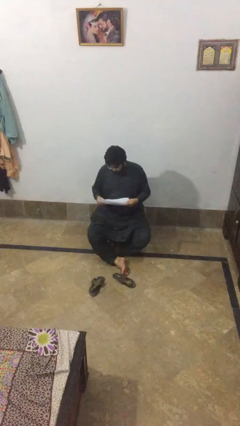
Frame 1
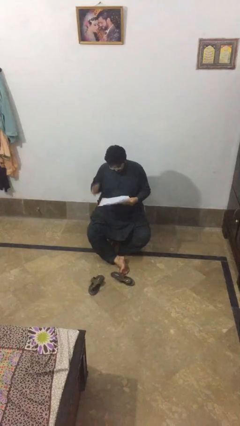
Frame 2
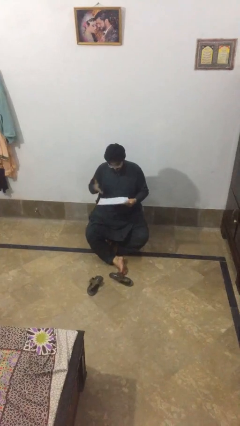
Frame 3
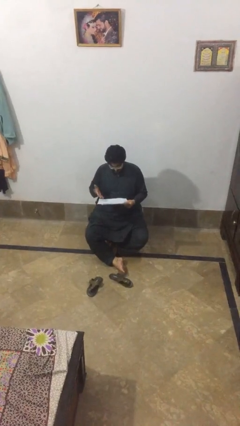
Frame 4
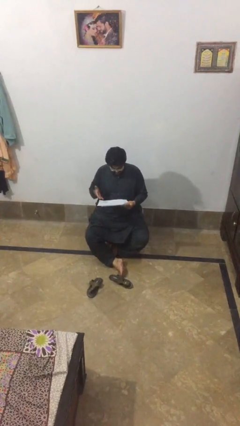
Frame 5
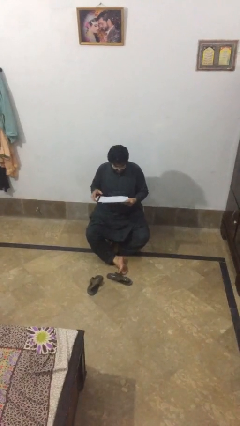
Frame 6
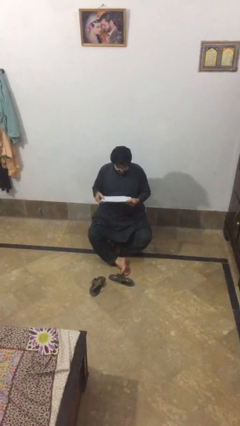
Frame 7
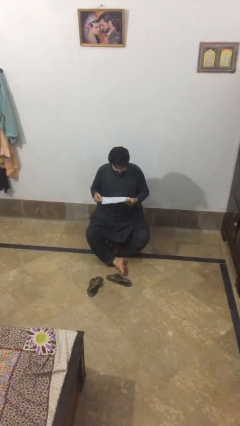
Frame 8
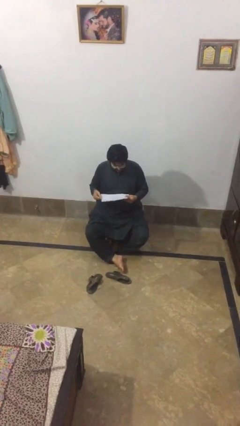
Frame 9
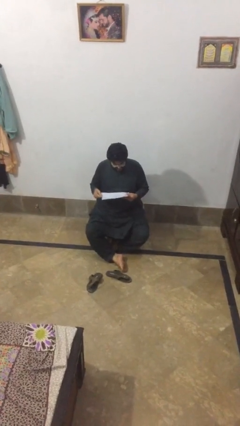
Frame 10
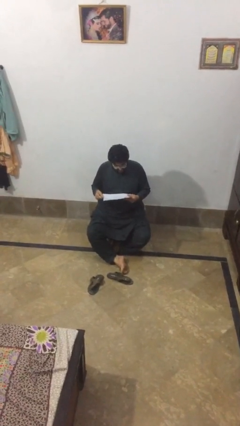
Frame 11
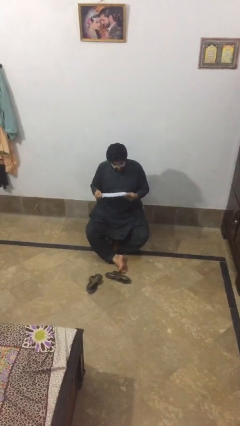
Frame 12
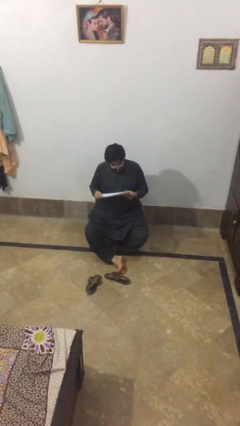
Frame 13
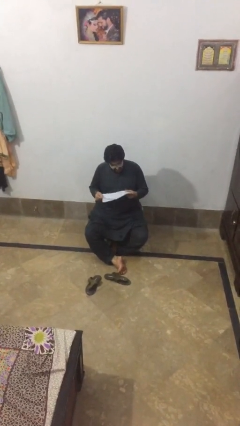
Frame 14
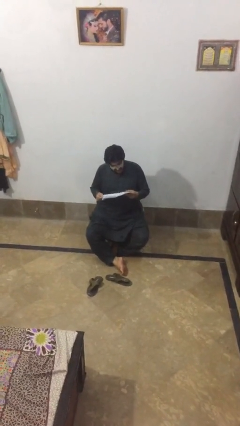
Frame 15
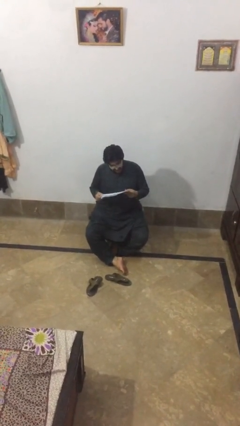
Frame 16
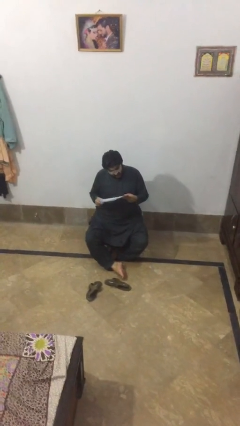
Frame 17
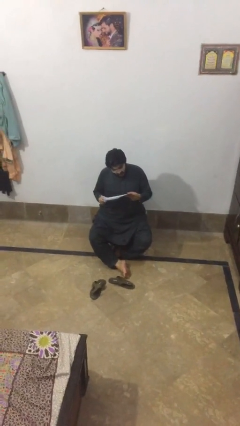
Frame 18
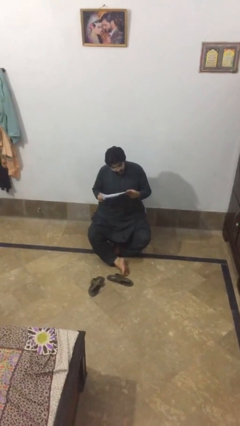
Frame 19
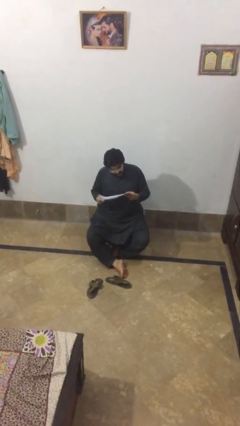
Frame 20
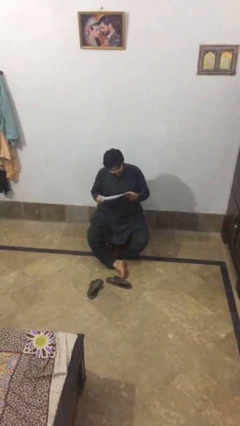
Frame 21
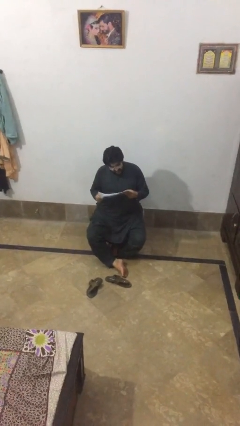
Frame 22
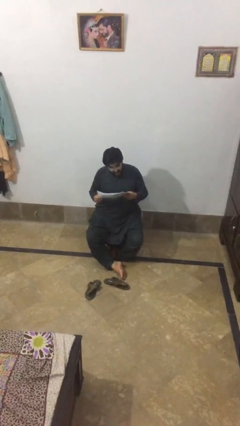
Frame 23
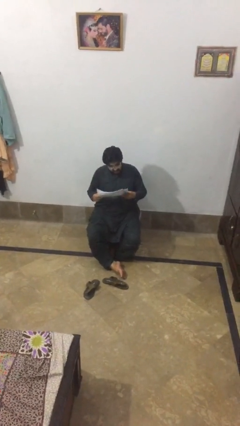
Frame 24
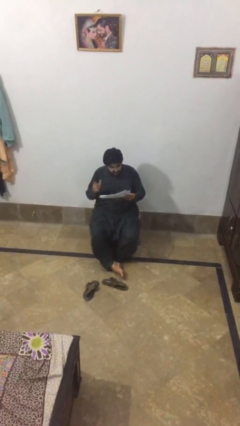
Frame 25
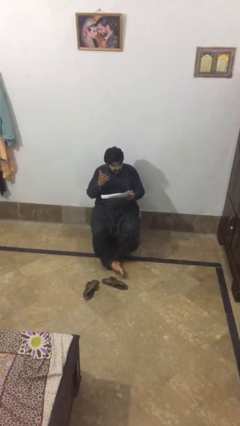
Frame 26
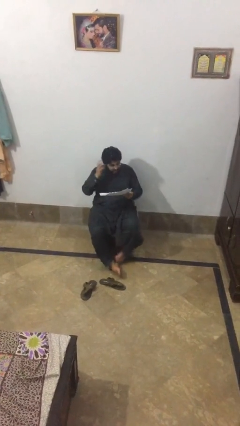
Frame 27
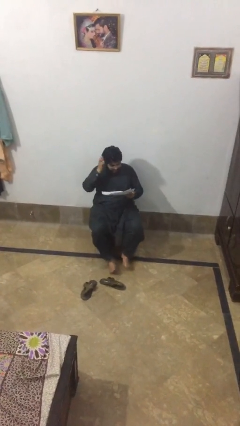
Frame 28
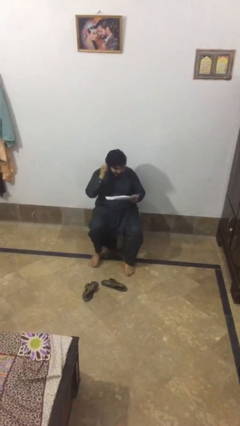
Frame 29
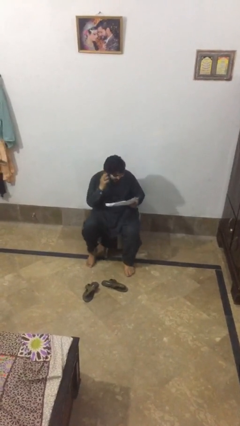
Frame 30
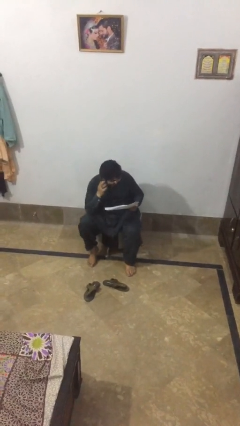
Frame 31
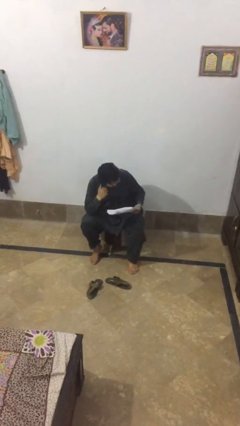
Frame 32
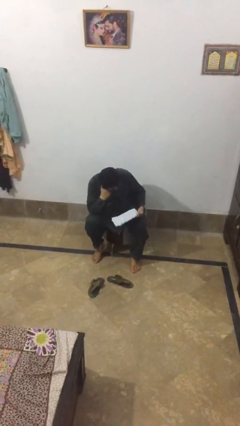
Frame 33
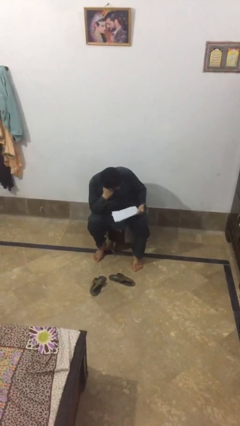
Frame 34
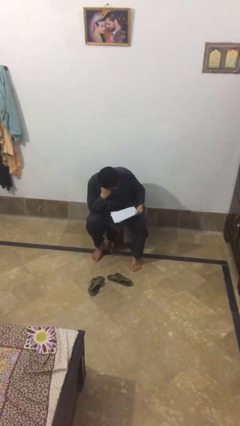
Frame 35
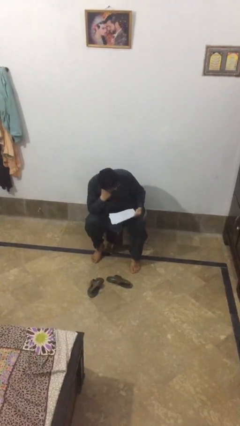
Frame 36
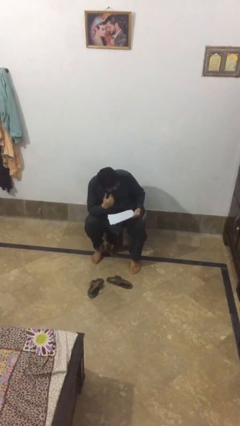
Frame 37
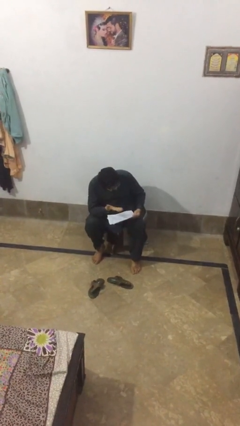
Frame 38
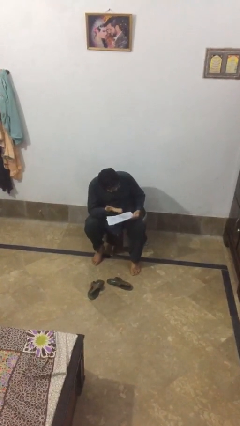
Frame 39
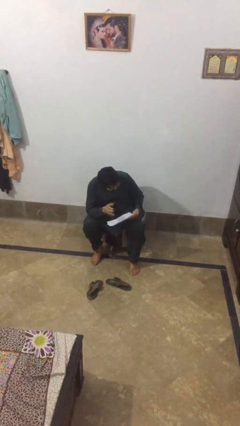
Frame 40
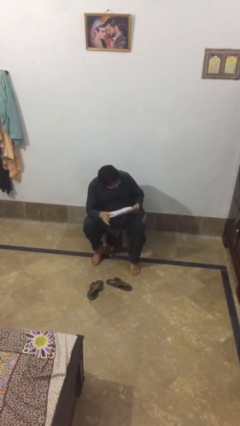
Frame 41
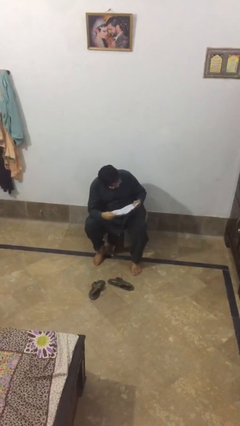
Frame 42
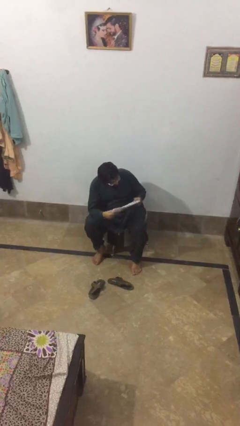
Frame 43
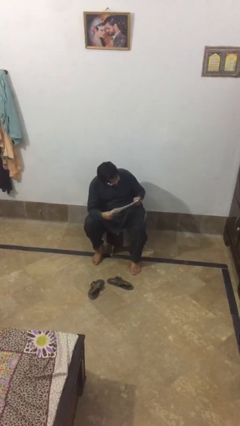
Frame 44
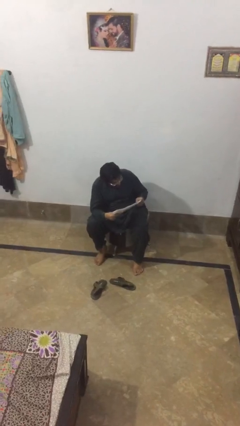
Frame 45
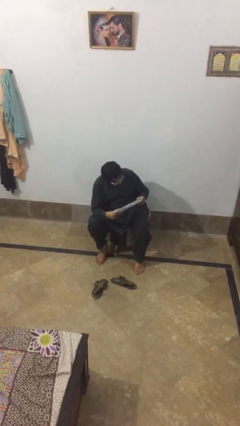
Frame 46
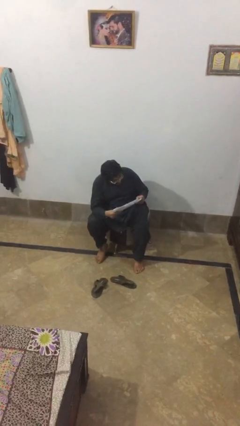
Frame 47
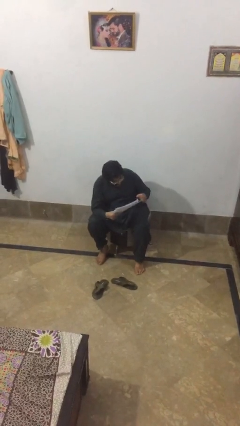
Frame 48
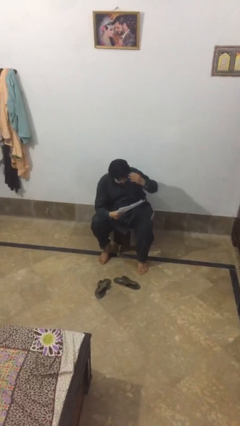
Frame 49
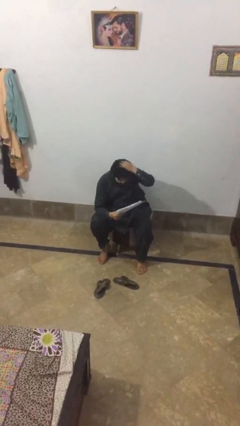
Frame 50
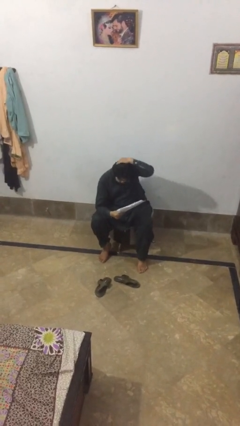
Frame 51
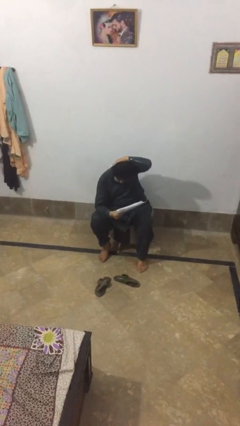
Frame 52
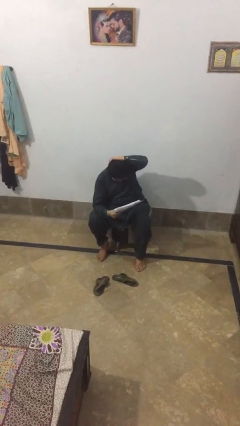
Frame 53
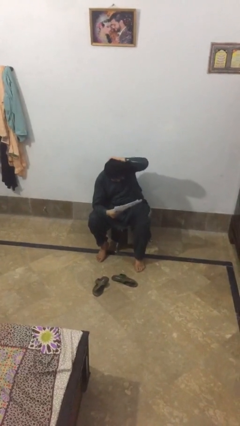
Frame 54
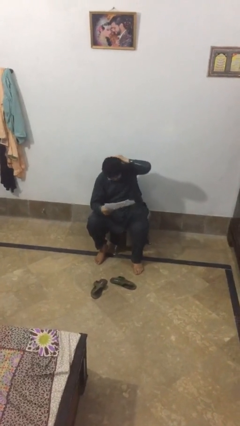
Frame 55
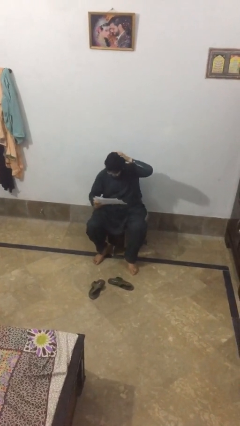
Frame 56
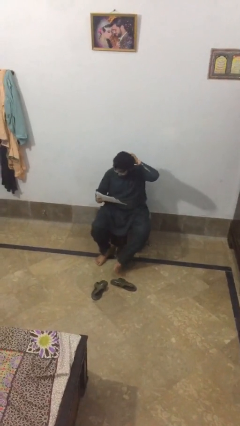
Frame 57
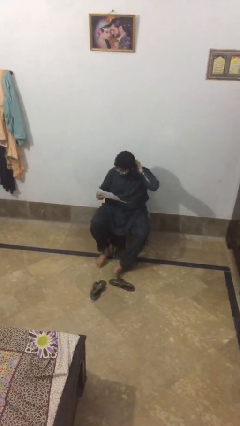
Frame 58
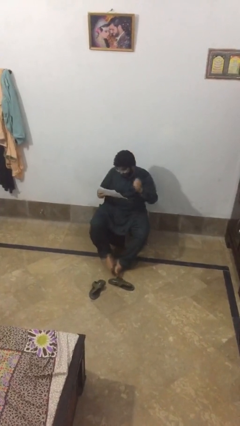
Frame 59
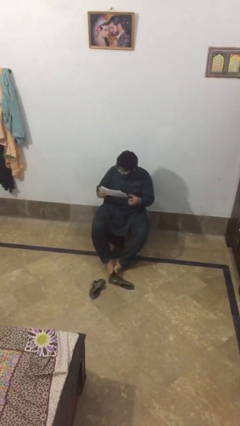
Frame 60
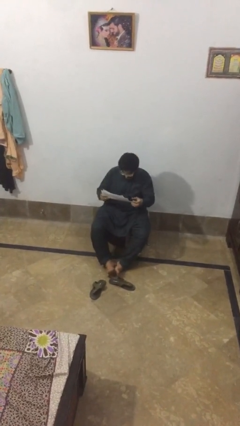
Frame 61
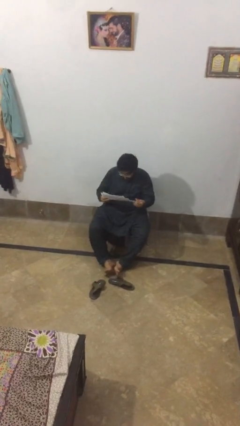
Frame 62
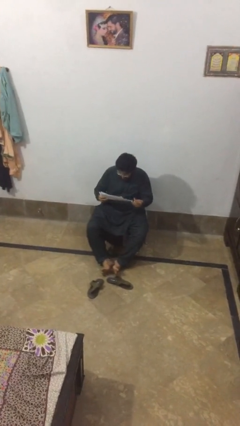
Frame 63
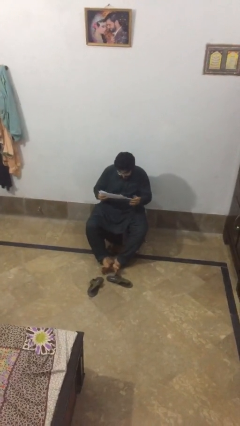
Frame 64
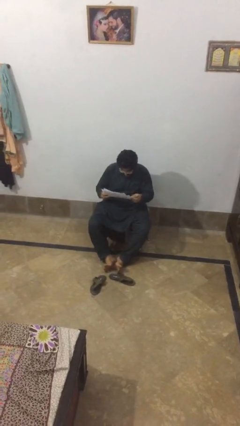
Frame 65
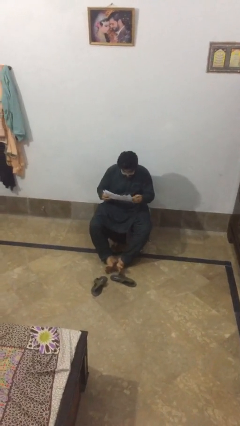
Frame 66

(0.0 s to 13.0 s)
person reads document

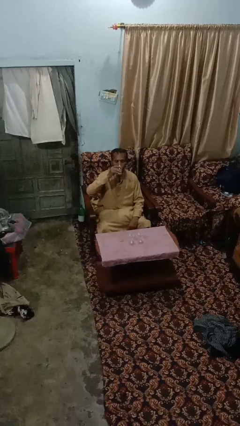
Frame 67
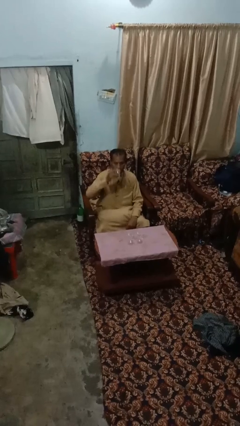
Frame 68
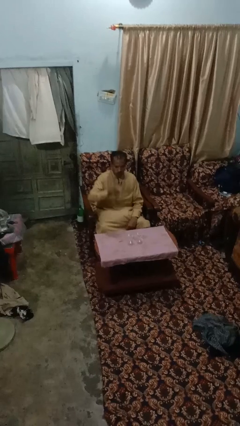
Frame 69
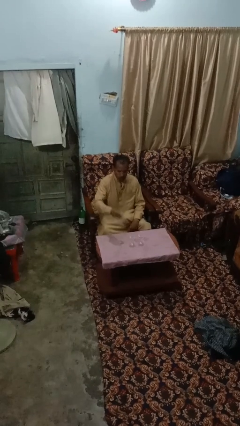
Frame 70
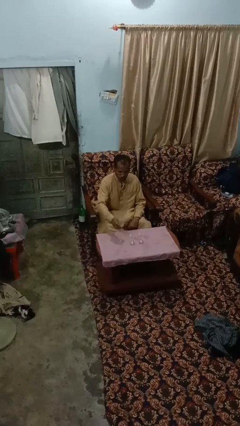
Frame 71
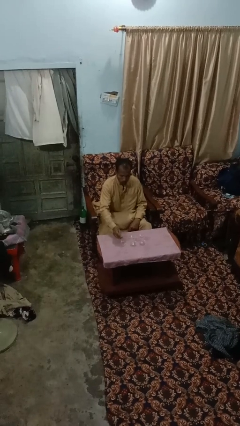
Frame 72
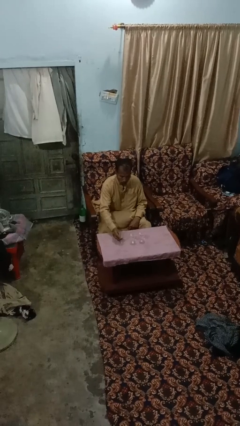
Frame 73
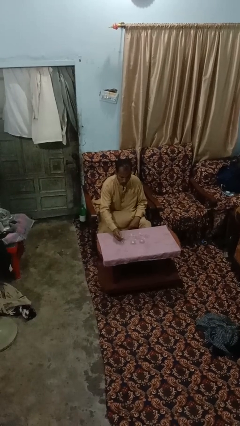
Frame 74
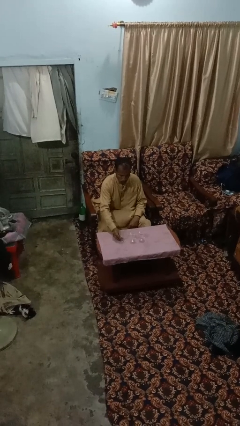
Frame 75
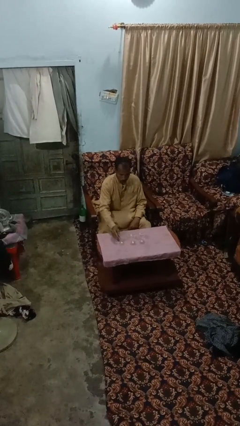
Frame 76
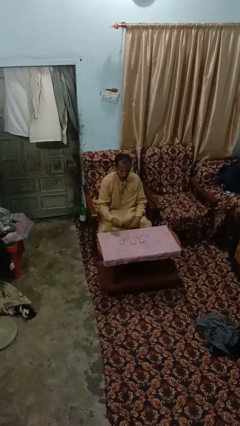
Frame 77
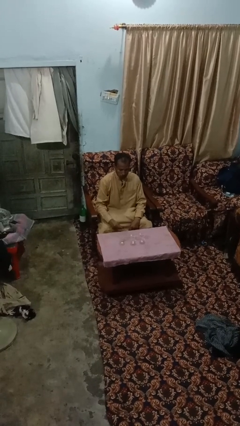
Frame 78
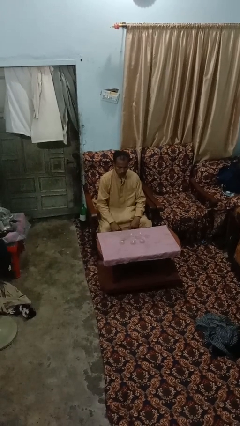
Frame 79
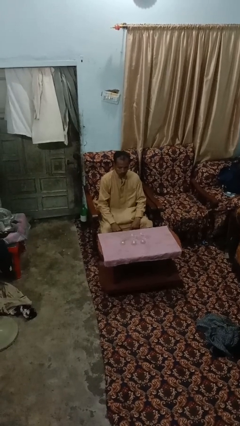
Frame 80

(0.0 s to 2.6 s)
person puts down object on table

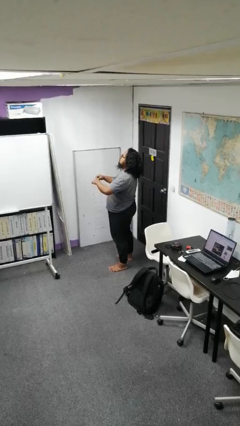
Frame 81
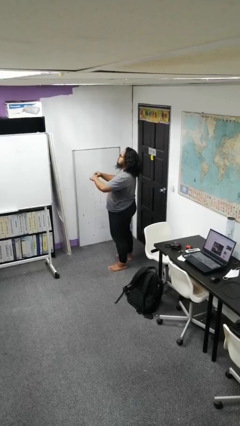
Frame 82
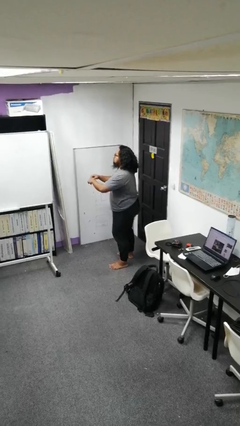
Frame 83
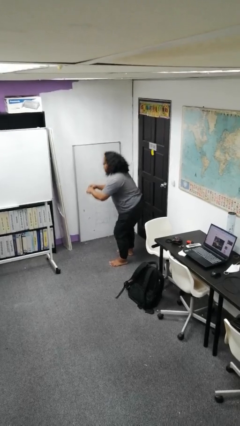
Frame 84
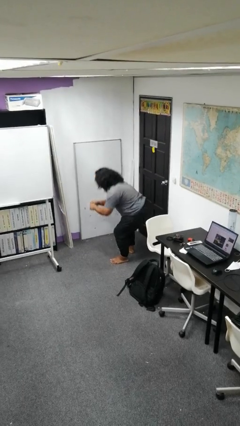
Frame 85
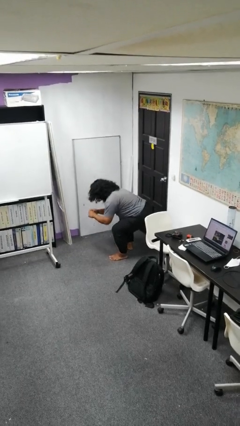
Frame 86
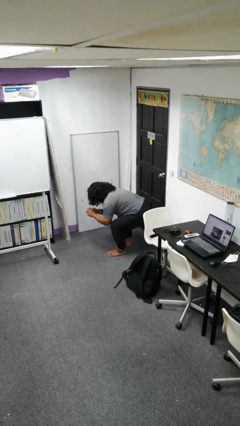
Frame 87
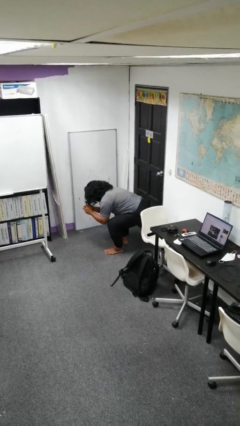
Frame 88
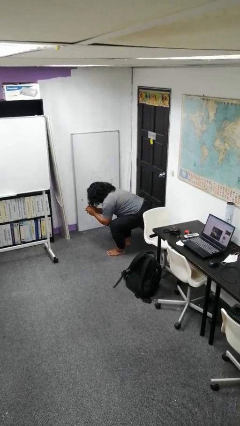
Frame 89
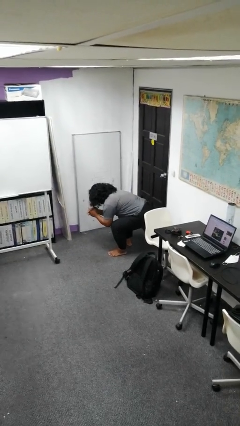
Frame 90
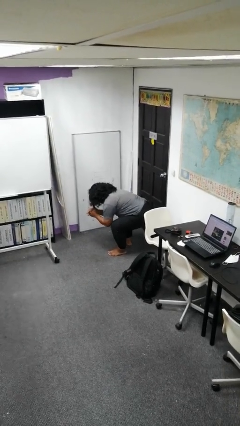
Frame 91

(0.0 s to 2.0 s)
person squats

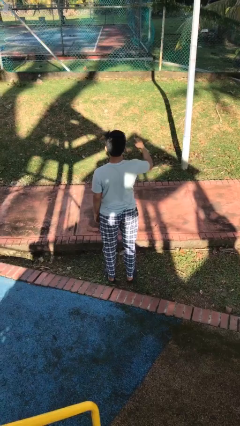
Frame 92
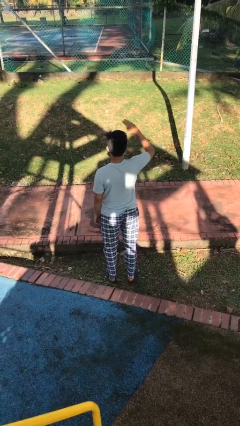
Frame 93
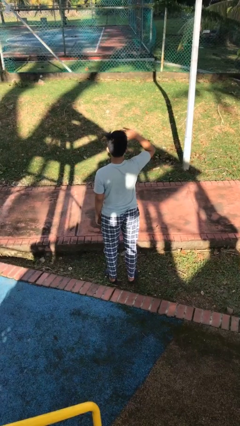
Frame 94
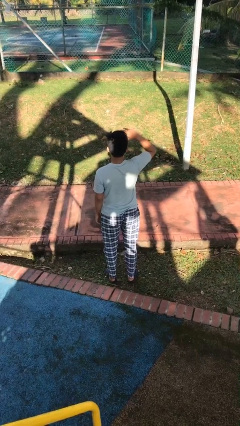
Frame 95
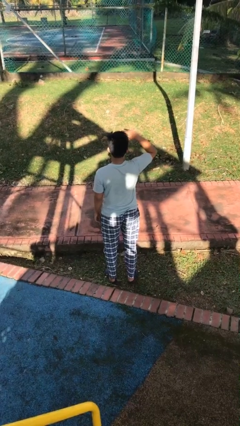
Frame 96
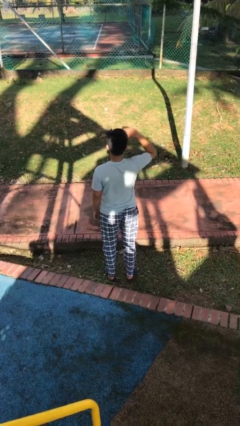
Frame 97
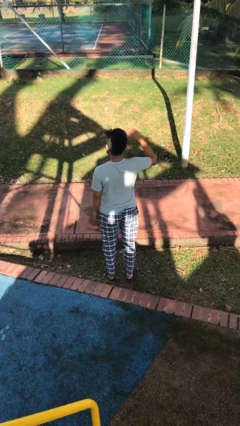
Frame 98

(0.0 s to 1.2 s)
person salutes
